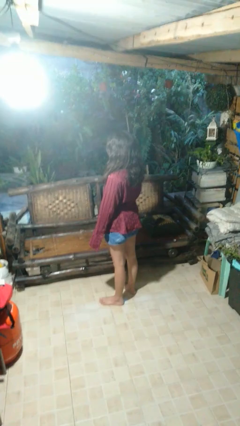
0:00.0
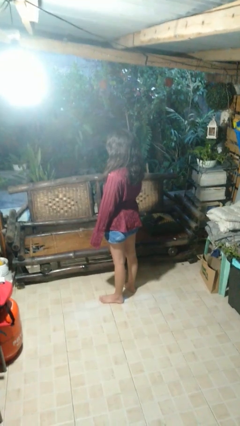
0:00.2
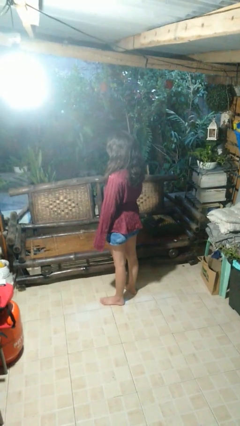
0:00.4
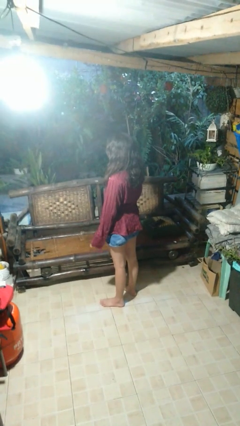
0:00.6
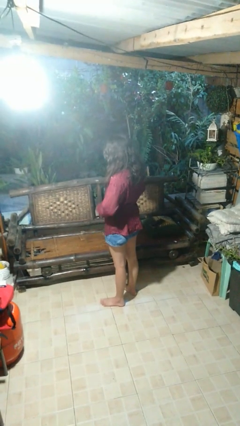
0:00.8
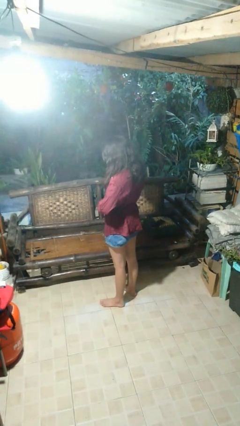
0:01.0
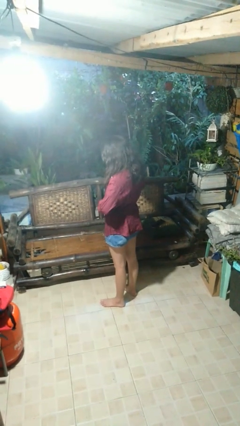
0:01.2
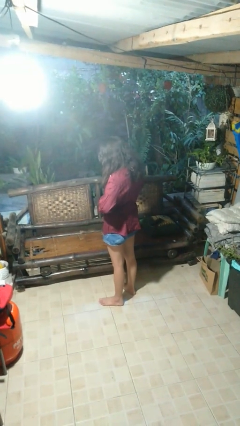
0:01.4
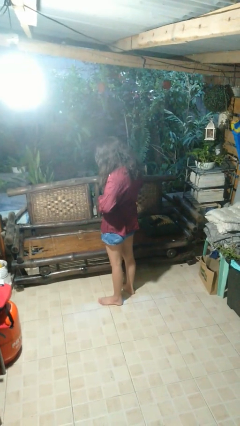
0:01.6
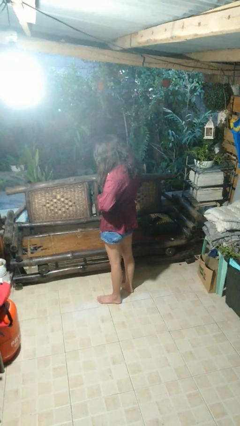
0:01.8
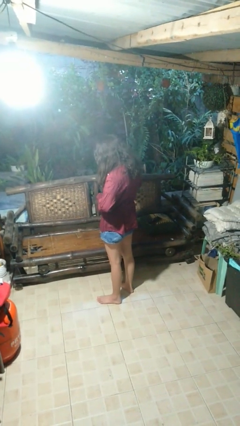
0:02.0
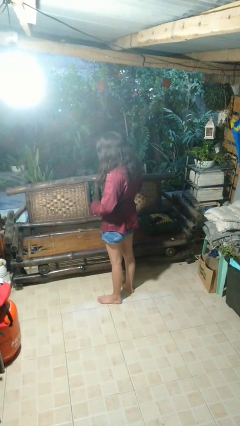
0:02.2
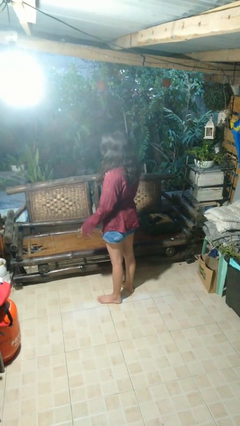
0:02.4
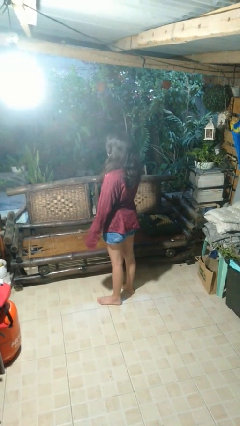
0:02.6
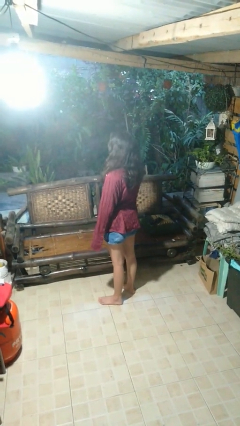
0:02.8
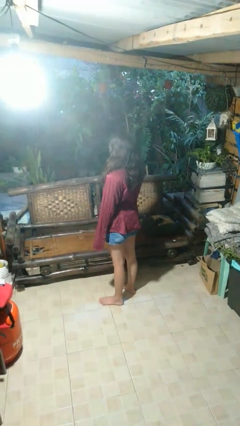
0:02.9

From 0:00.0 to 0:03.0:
person buttons shirt

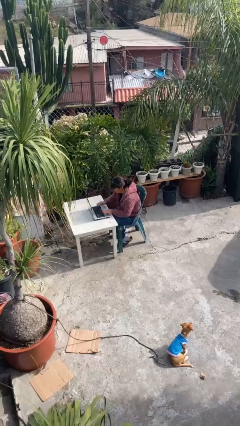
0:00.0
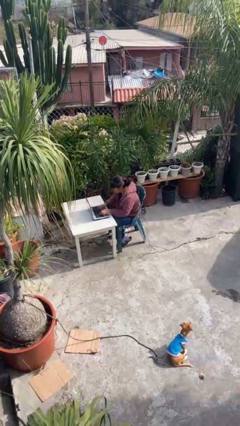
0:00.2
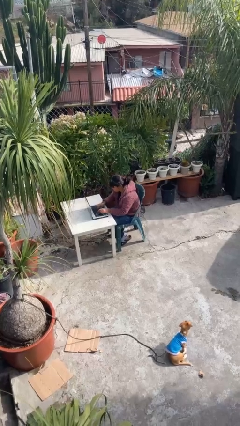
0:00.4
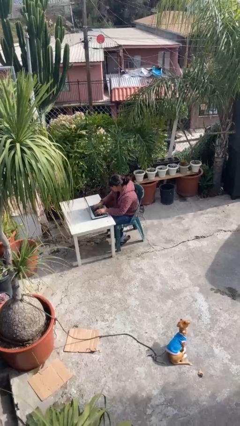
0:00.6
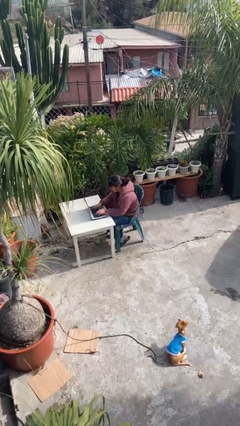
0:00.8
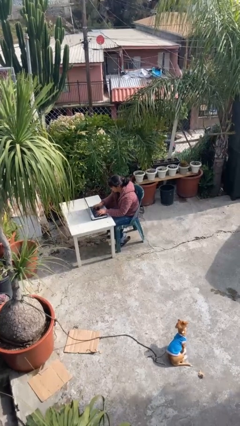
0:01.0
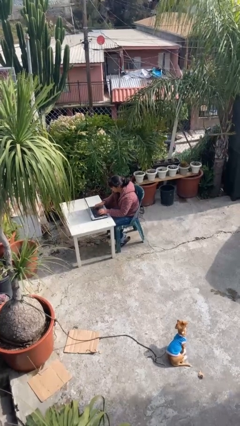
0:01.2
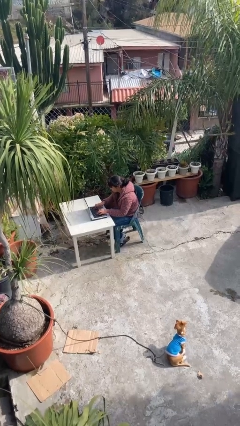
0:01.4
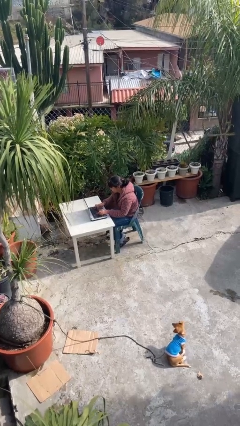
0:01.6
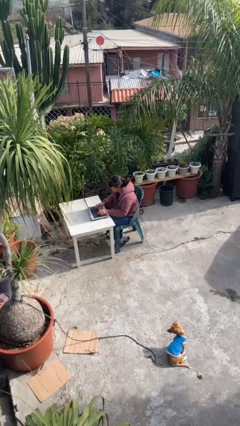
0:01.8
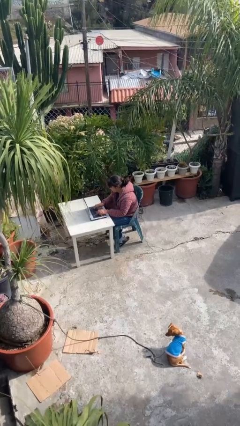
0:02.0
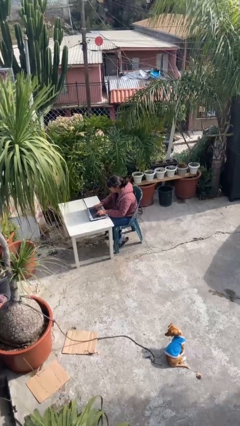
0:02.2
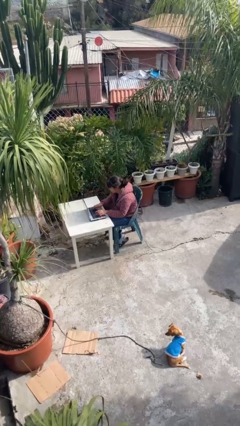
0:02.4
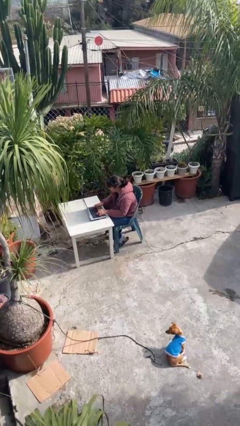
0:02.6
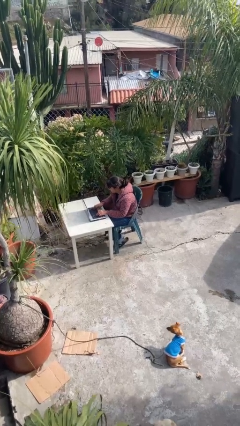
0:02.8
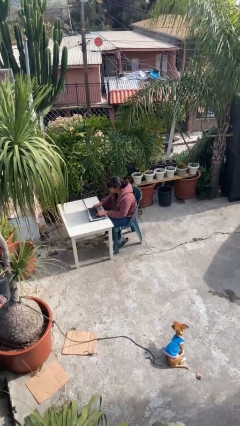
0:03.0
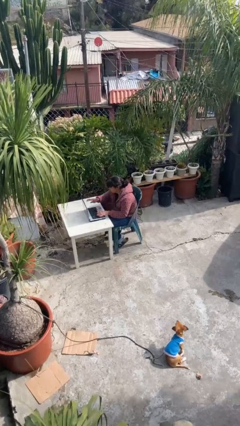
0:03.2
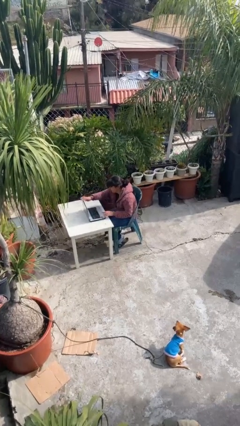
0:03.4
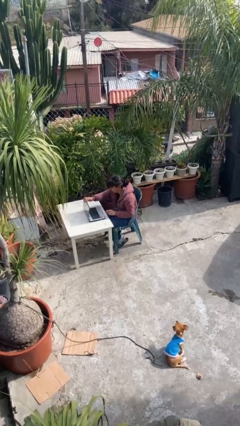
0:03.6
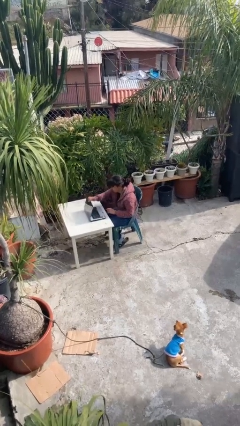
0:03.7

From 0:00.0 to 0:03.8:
person interacts with laptop

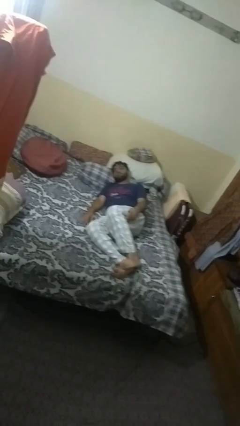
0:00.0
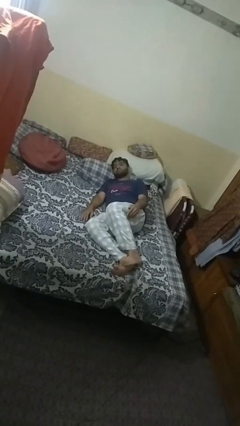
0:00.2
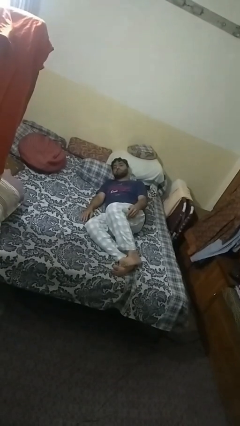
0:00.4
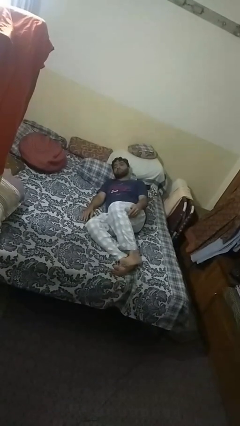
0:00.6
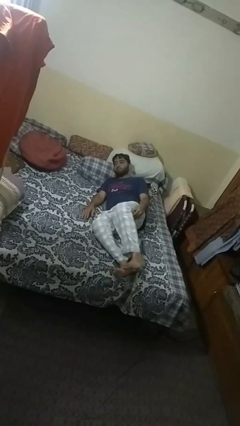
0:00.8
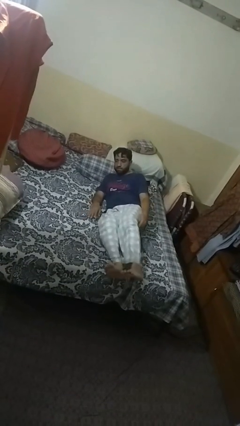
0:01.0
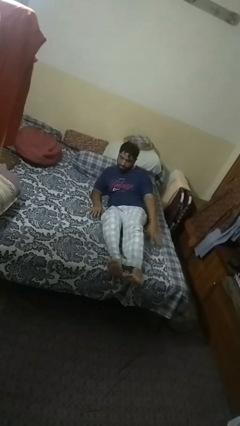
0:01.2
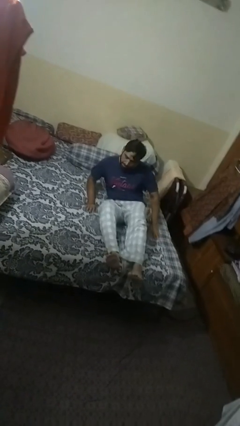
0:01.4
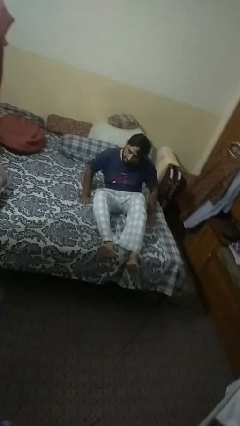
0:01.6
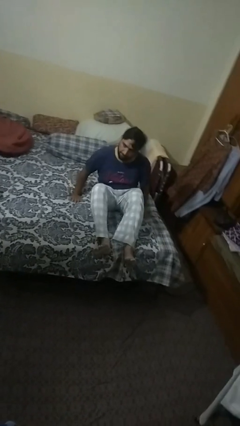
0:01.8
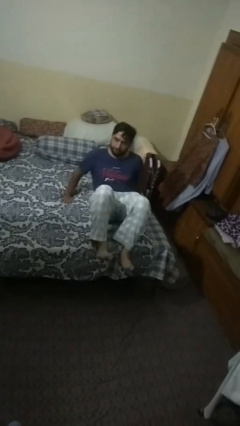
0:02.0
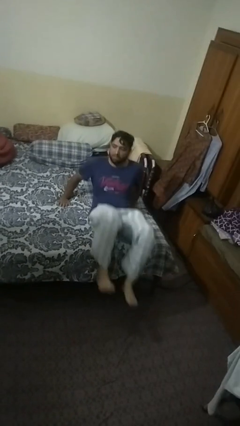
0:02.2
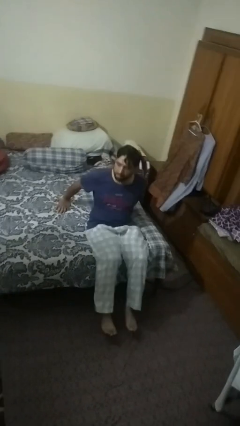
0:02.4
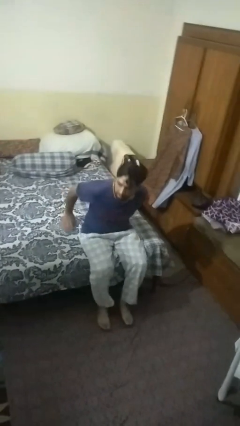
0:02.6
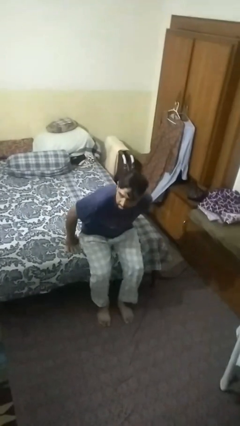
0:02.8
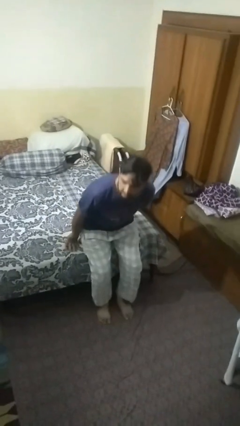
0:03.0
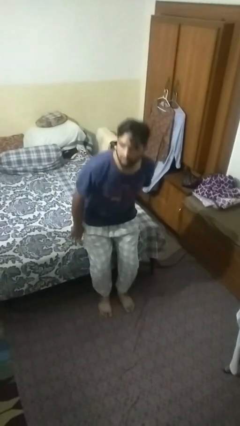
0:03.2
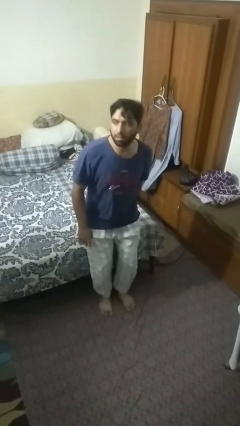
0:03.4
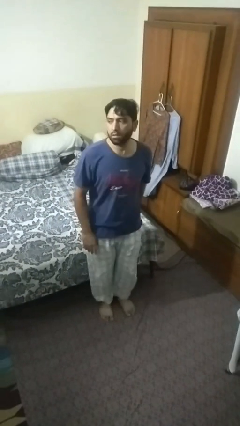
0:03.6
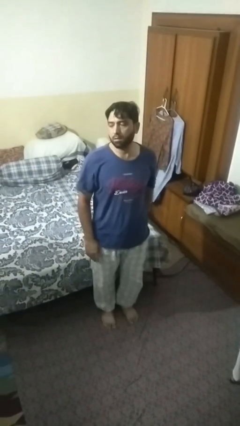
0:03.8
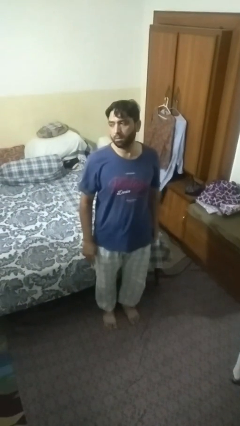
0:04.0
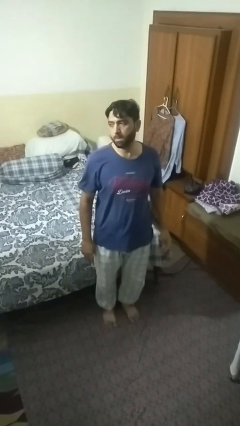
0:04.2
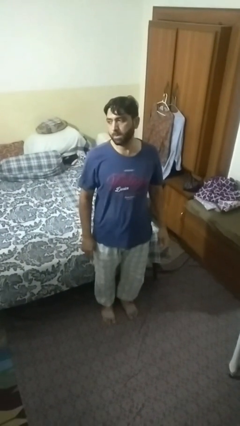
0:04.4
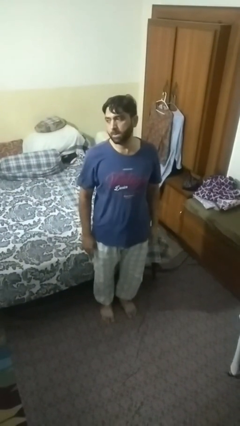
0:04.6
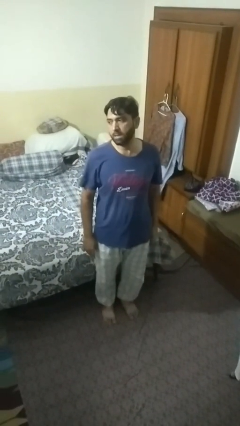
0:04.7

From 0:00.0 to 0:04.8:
person stands up

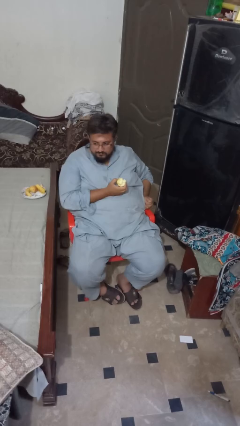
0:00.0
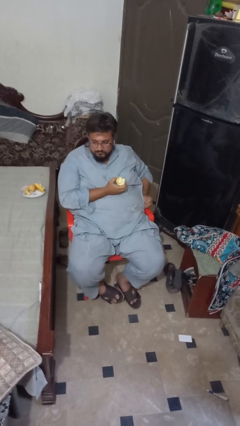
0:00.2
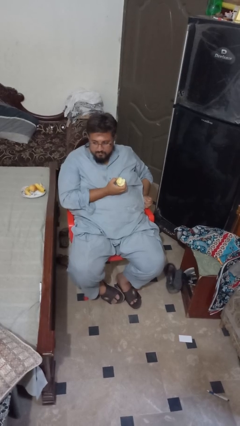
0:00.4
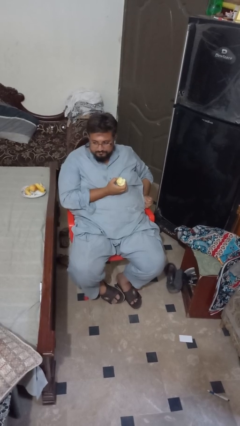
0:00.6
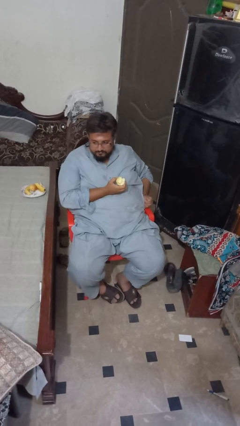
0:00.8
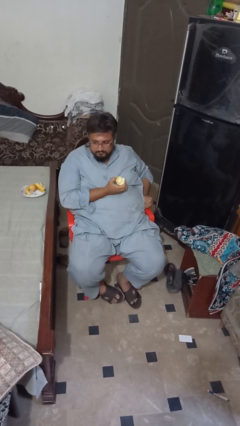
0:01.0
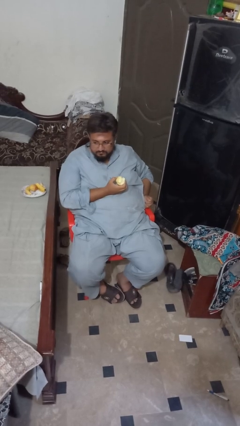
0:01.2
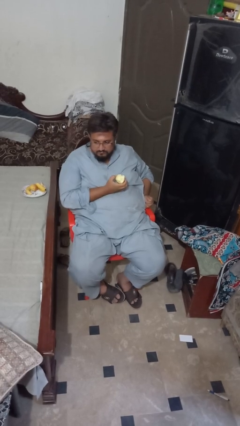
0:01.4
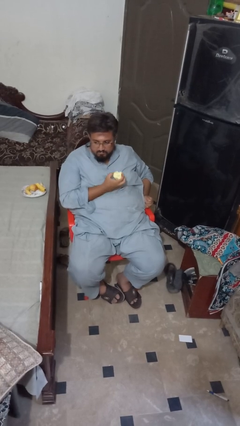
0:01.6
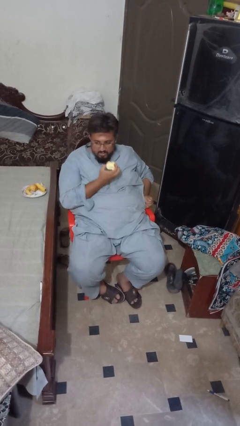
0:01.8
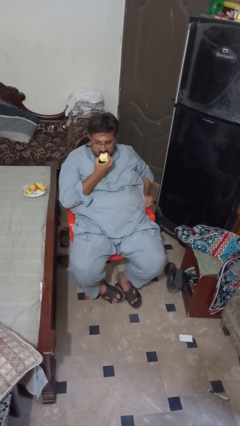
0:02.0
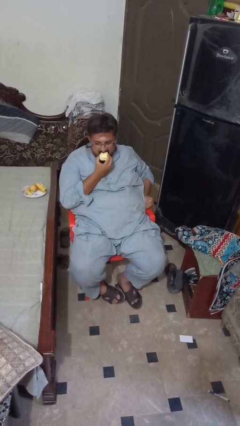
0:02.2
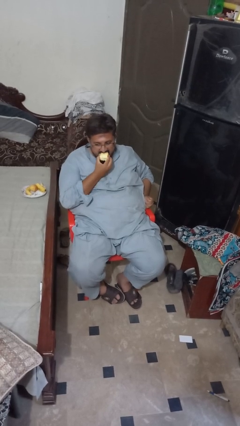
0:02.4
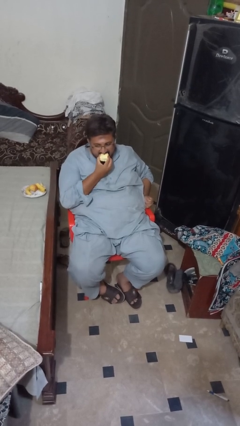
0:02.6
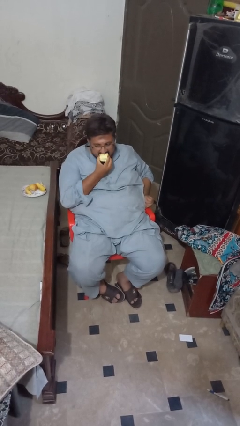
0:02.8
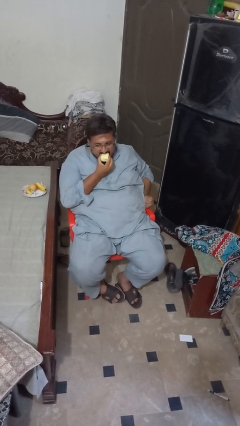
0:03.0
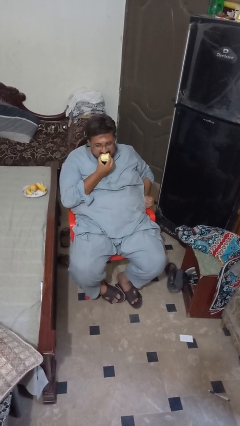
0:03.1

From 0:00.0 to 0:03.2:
person eats apple

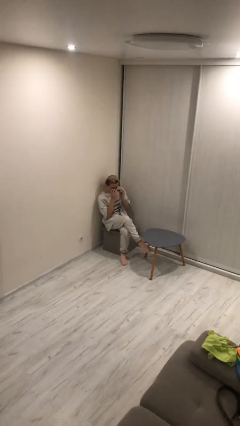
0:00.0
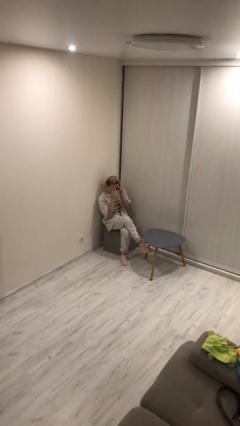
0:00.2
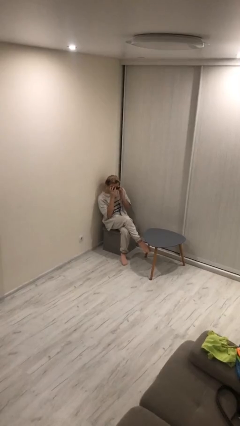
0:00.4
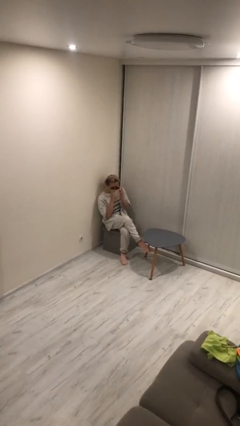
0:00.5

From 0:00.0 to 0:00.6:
person puts on sunglasses

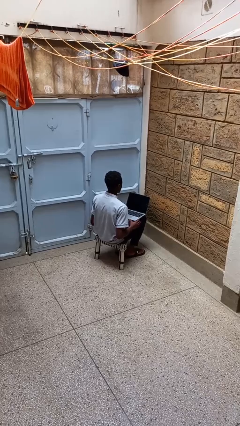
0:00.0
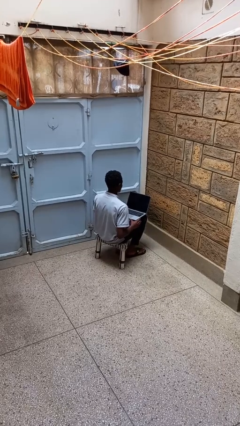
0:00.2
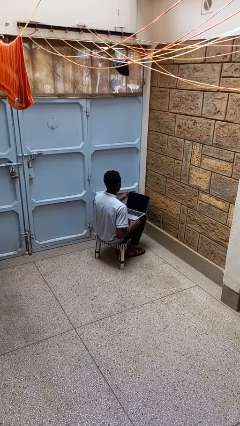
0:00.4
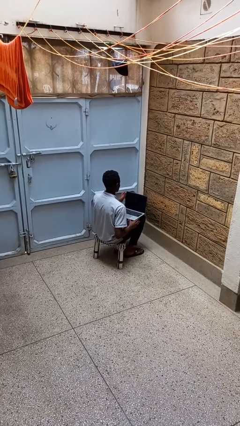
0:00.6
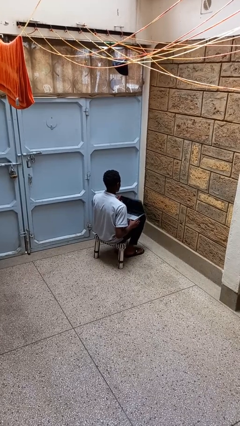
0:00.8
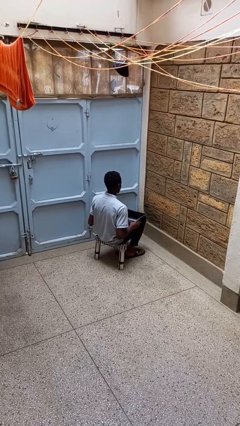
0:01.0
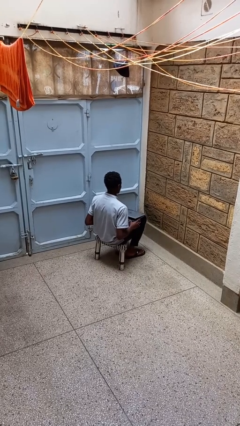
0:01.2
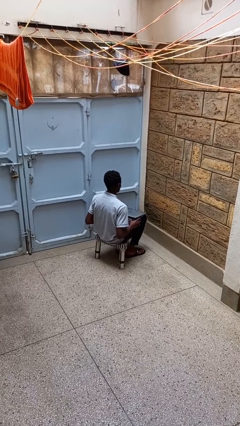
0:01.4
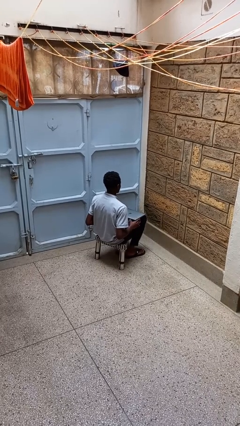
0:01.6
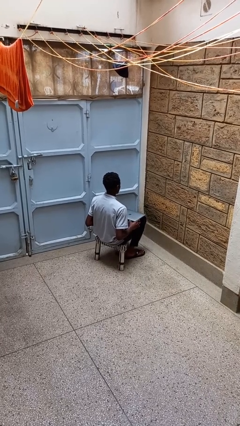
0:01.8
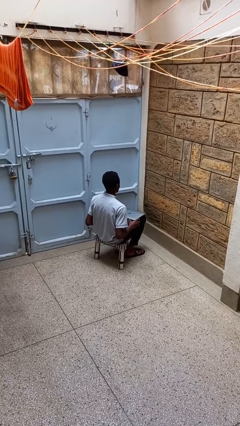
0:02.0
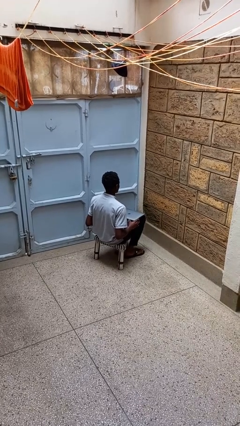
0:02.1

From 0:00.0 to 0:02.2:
person closes laptop
